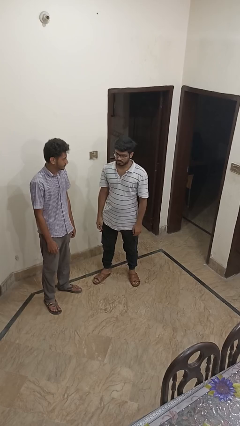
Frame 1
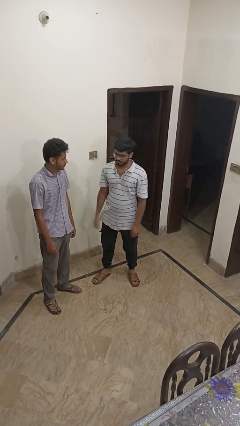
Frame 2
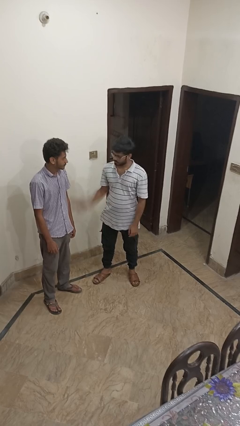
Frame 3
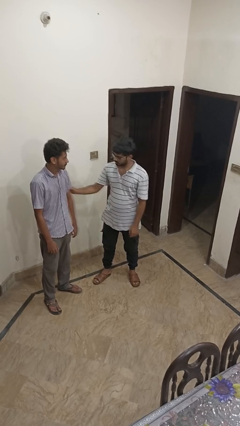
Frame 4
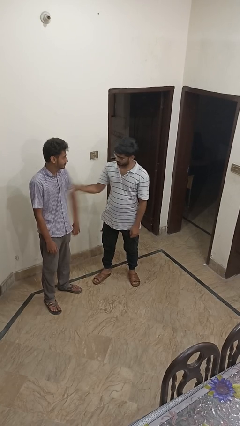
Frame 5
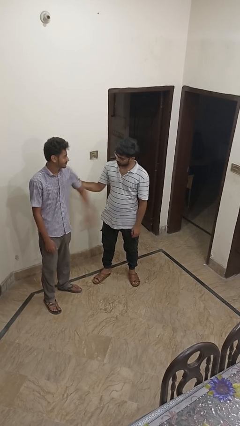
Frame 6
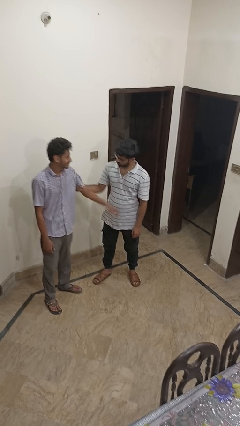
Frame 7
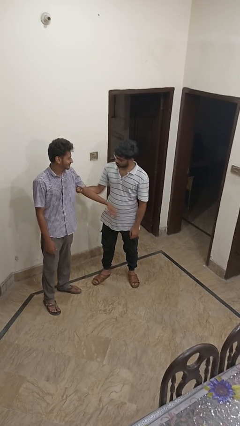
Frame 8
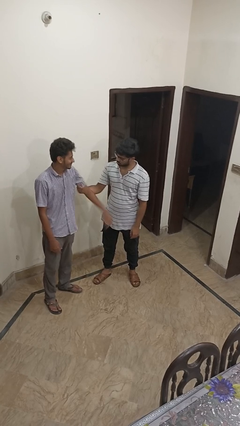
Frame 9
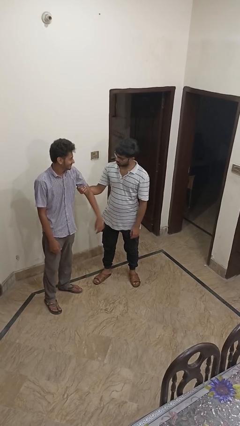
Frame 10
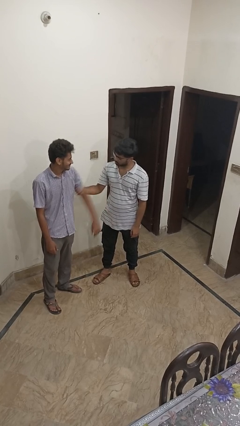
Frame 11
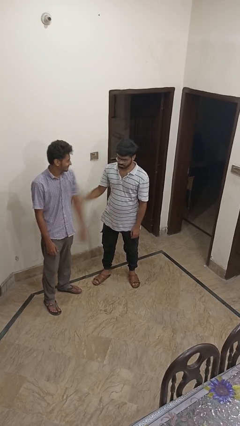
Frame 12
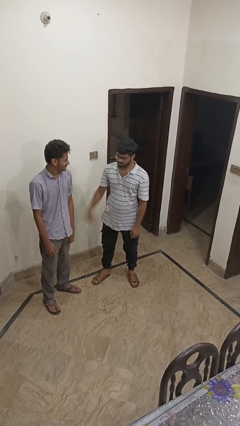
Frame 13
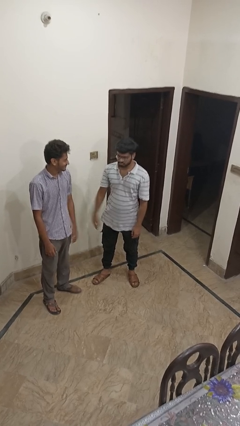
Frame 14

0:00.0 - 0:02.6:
person grabs person by bicep

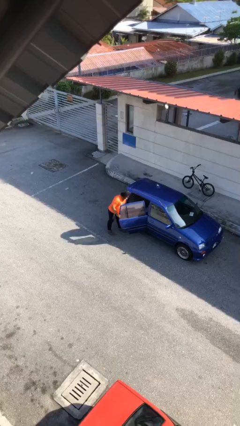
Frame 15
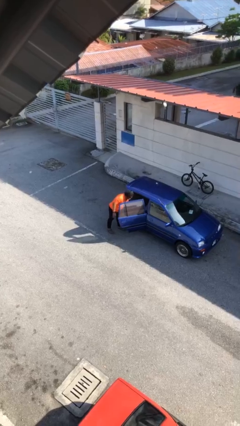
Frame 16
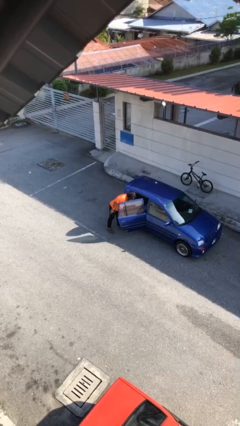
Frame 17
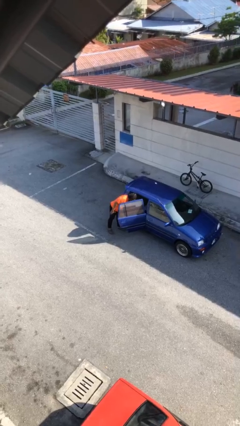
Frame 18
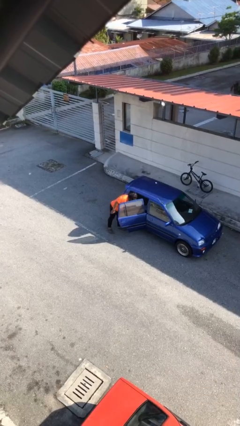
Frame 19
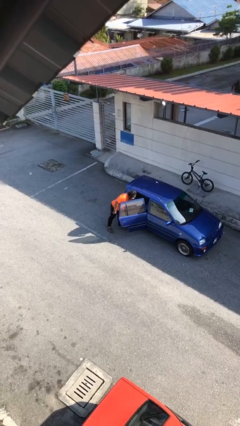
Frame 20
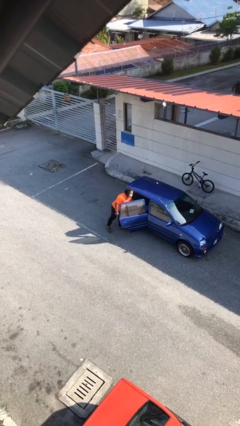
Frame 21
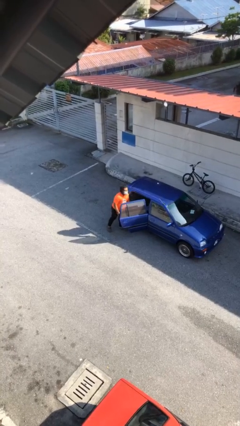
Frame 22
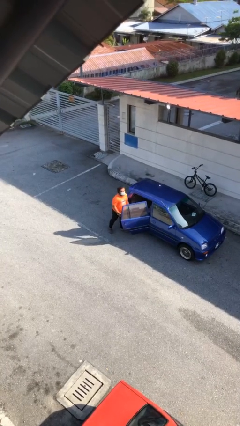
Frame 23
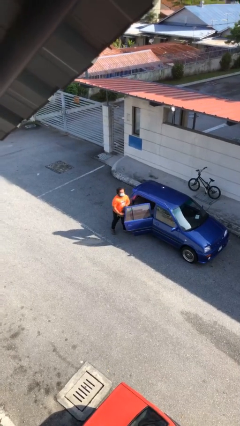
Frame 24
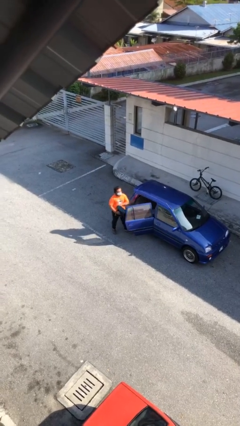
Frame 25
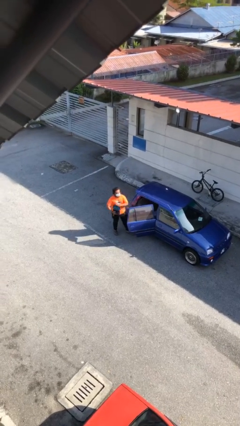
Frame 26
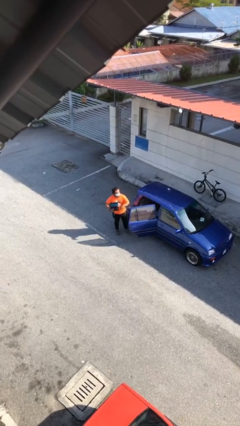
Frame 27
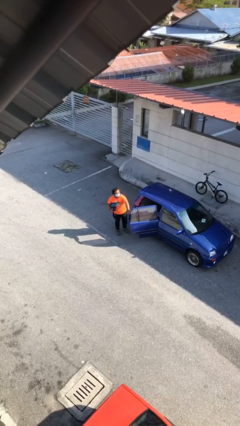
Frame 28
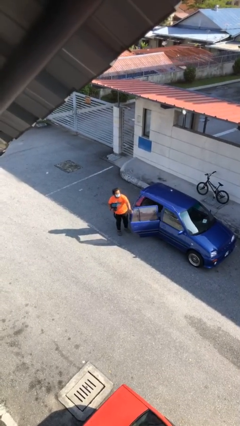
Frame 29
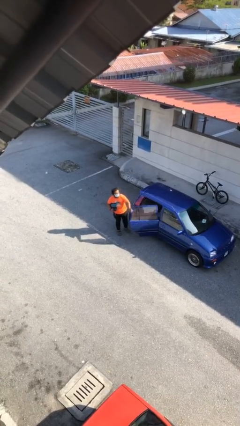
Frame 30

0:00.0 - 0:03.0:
person unloads car

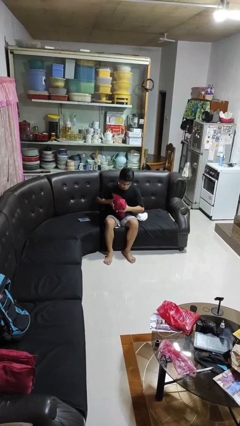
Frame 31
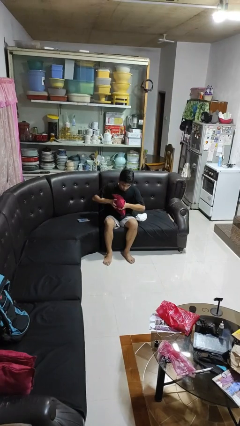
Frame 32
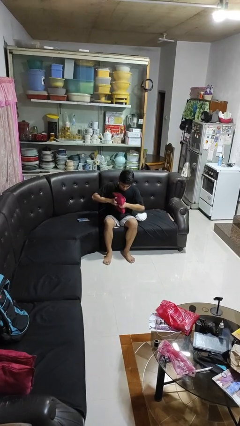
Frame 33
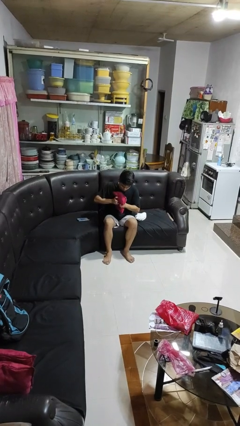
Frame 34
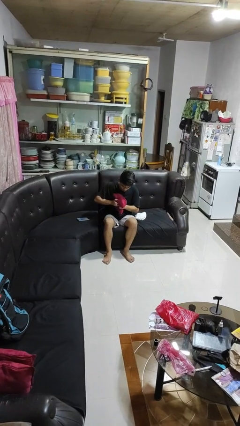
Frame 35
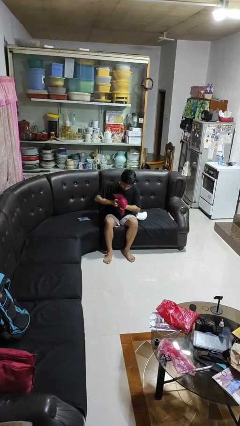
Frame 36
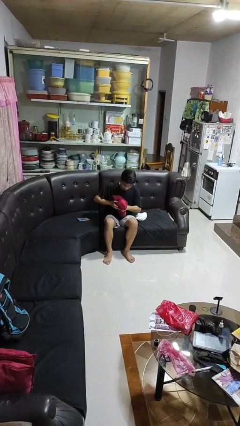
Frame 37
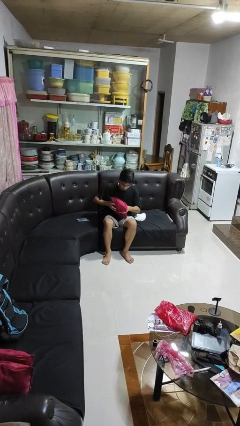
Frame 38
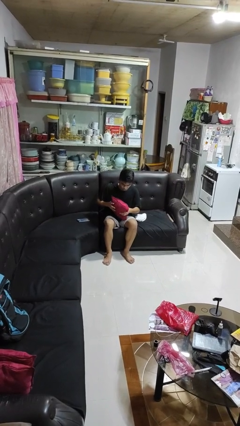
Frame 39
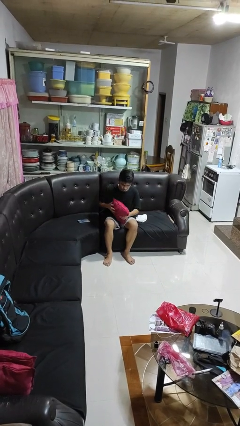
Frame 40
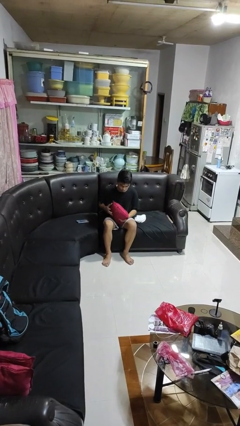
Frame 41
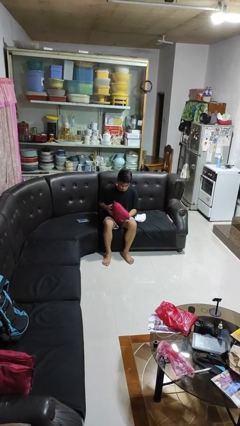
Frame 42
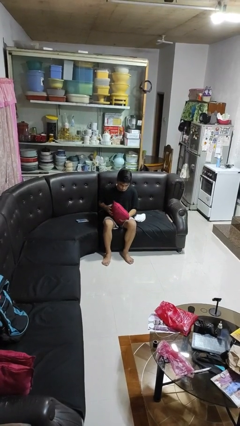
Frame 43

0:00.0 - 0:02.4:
person squeezes object

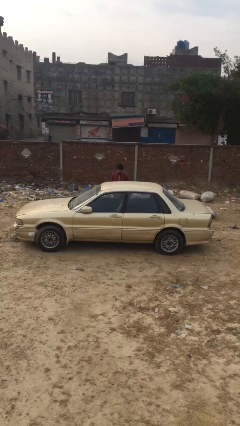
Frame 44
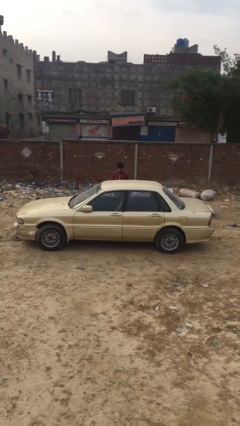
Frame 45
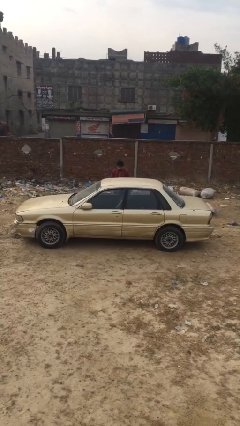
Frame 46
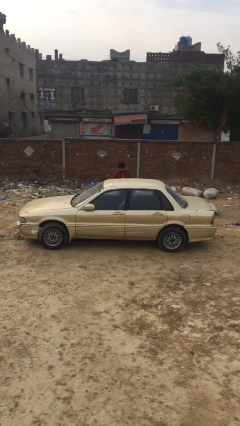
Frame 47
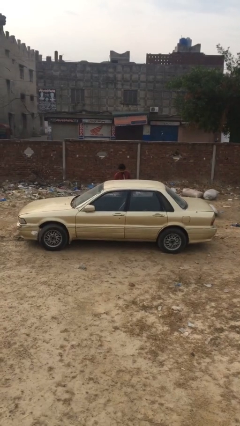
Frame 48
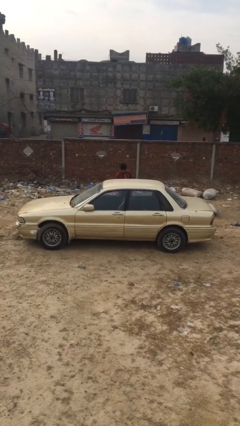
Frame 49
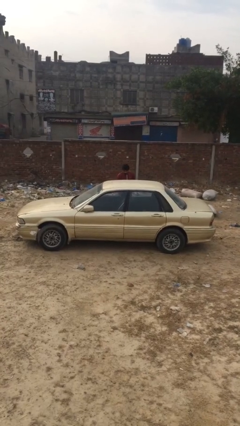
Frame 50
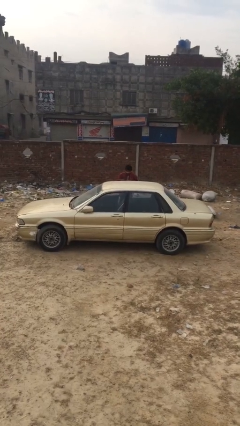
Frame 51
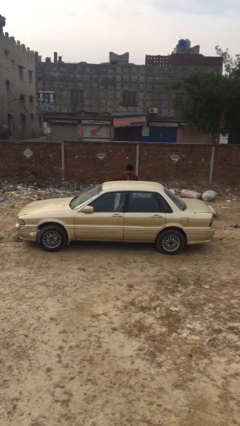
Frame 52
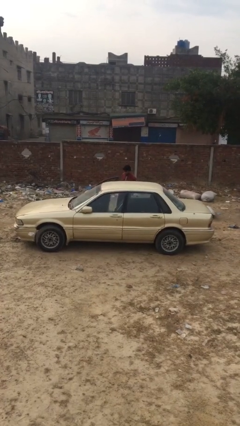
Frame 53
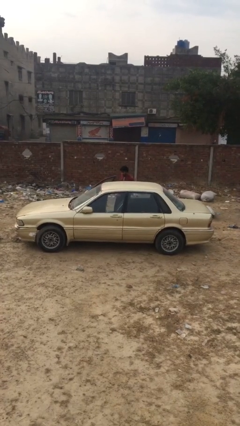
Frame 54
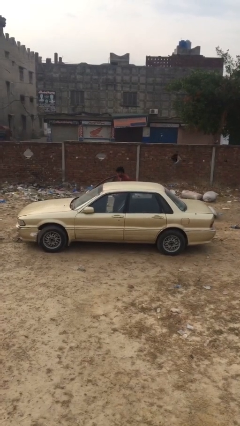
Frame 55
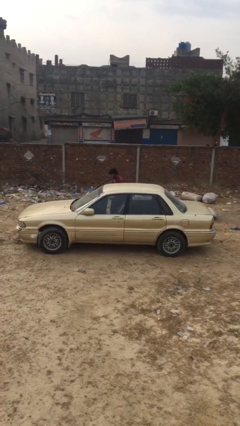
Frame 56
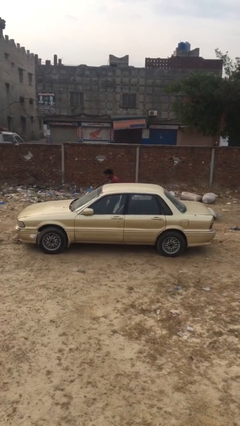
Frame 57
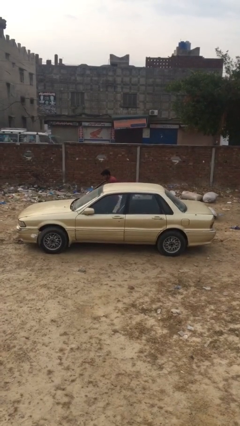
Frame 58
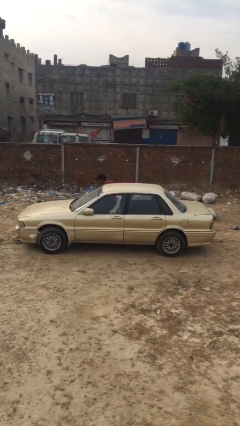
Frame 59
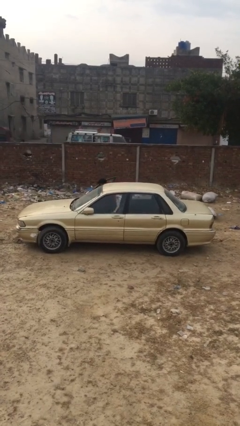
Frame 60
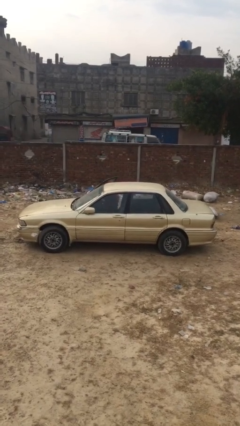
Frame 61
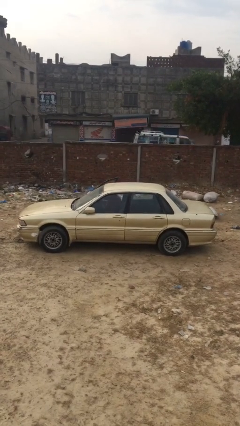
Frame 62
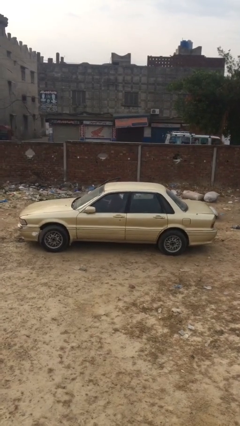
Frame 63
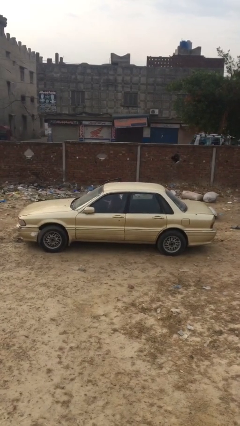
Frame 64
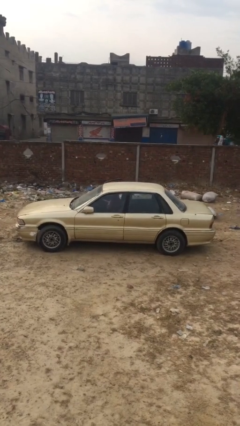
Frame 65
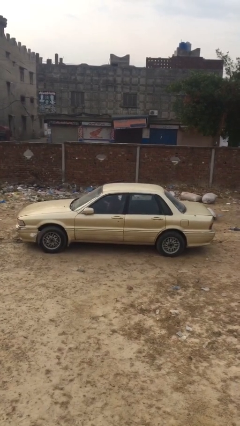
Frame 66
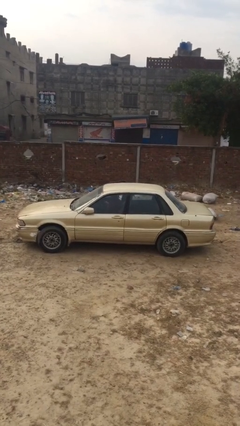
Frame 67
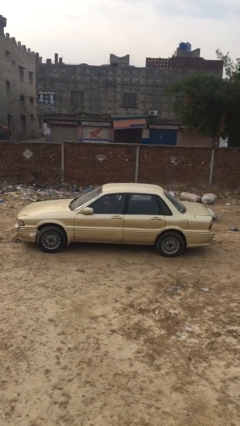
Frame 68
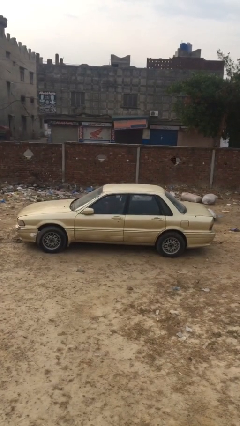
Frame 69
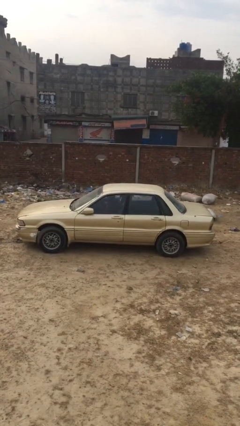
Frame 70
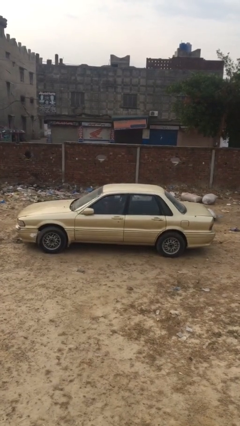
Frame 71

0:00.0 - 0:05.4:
car picks up person

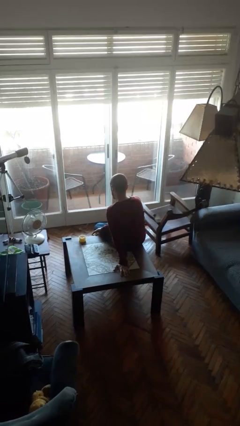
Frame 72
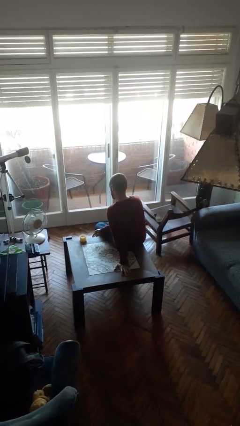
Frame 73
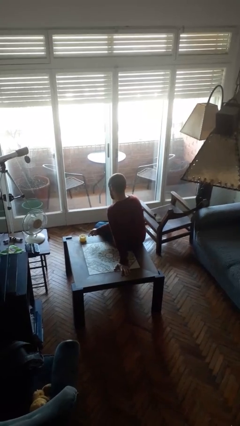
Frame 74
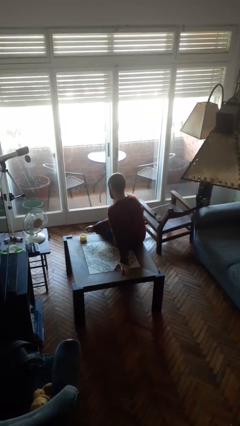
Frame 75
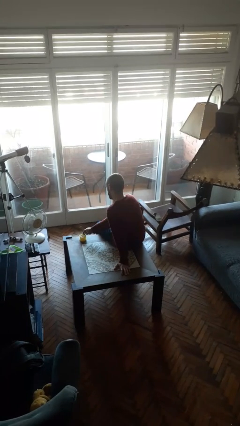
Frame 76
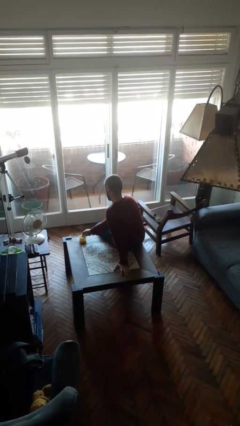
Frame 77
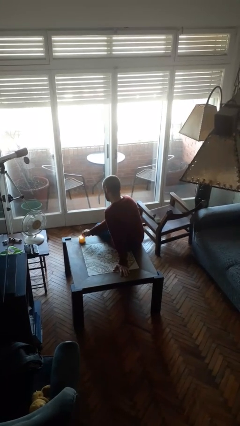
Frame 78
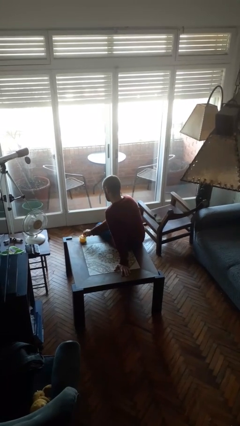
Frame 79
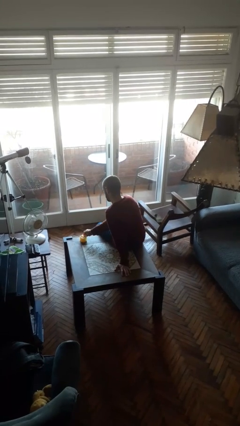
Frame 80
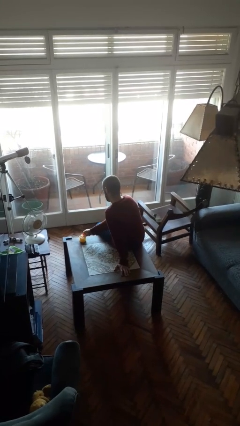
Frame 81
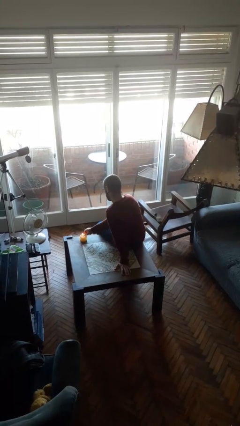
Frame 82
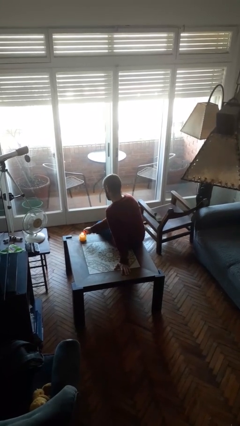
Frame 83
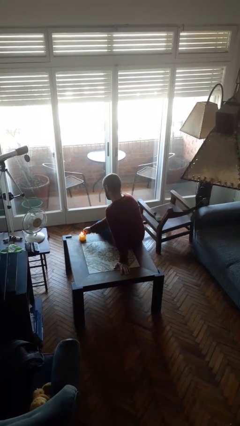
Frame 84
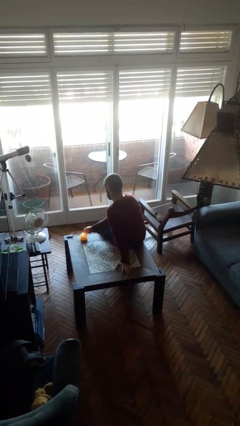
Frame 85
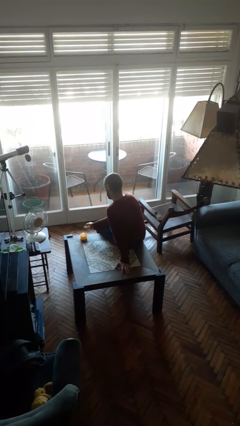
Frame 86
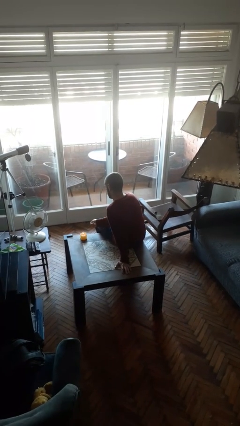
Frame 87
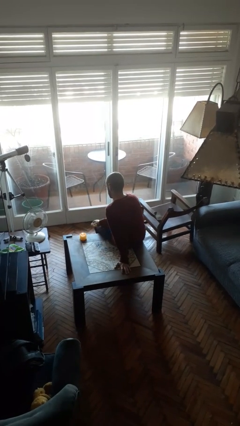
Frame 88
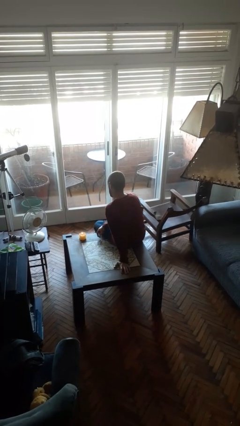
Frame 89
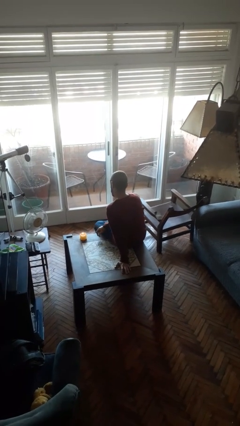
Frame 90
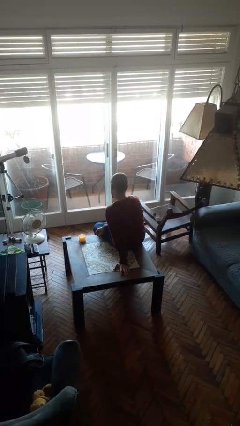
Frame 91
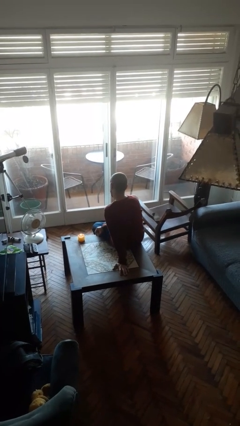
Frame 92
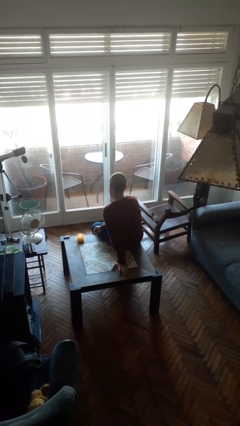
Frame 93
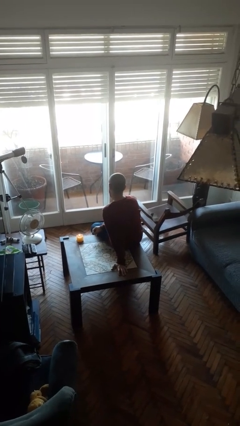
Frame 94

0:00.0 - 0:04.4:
person lights candle
